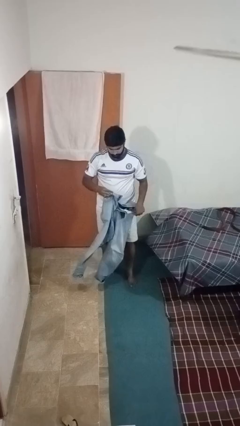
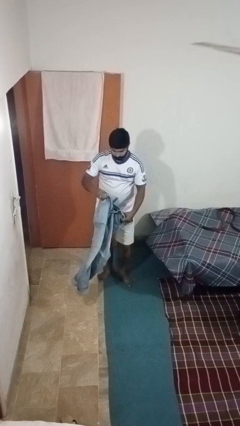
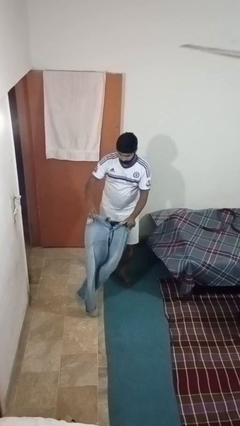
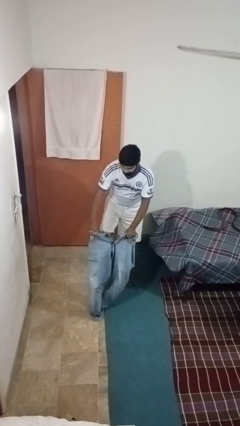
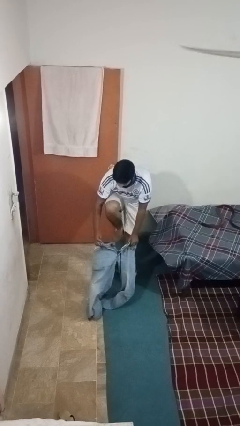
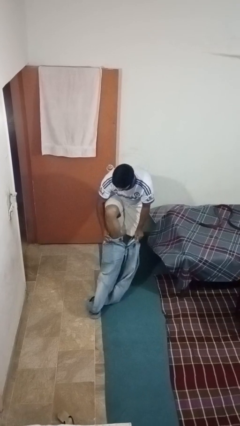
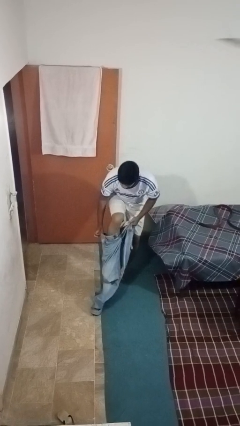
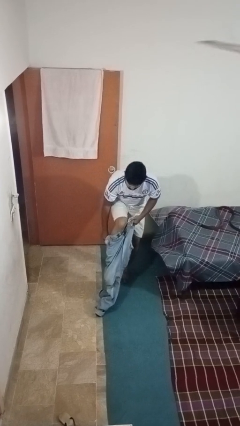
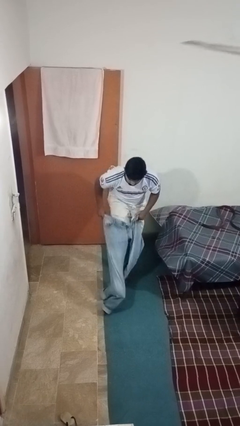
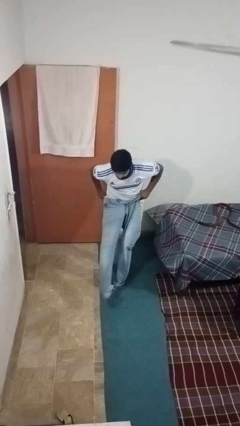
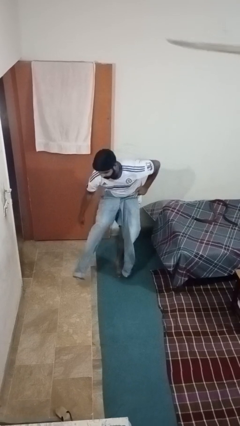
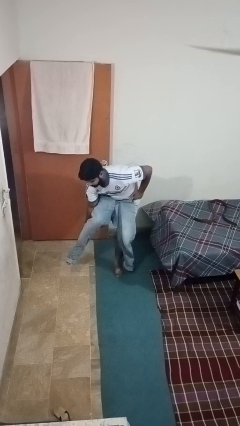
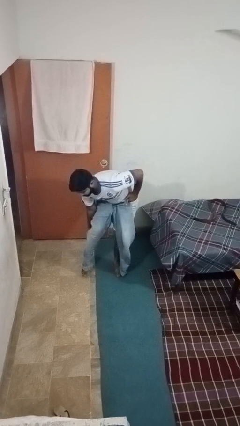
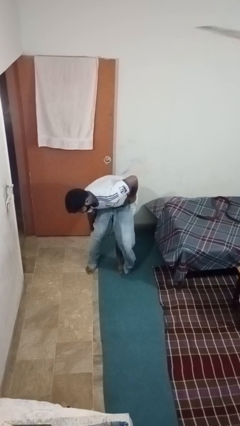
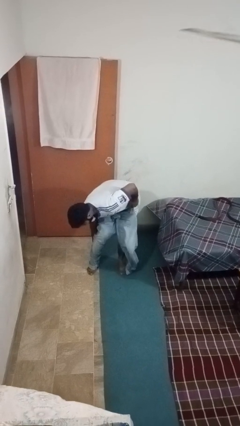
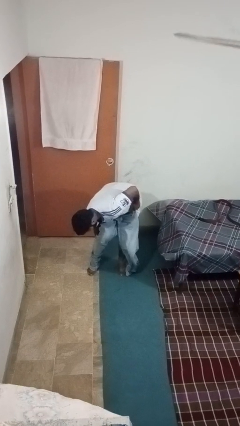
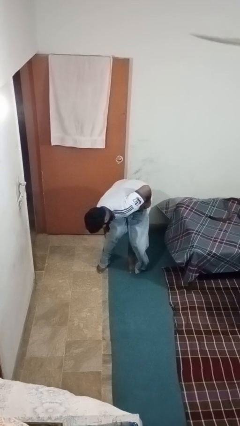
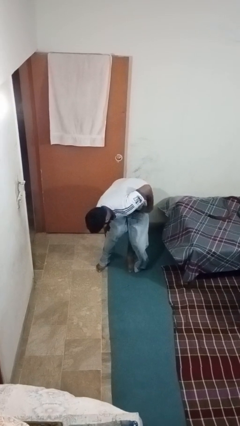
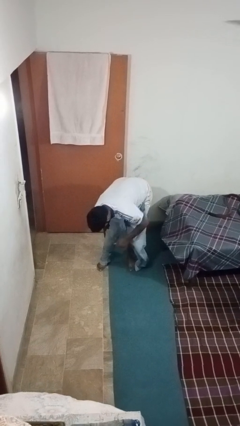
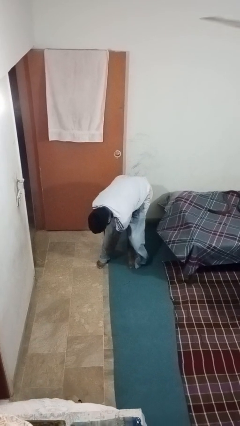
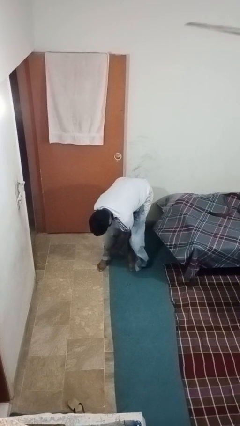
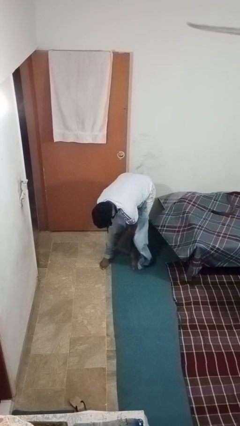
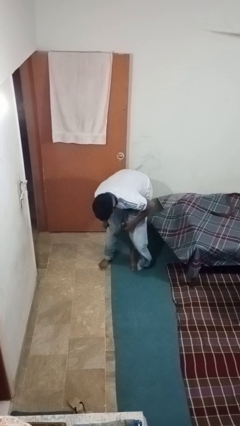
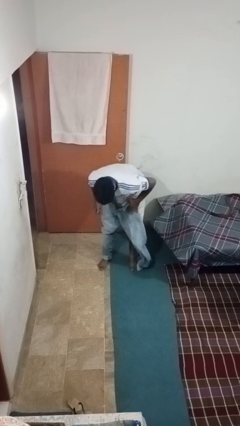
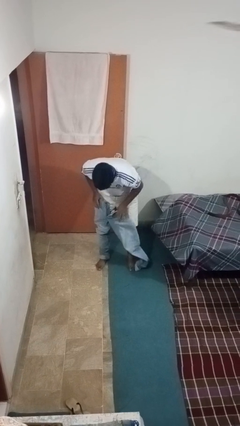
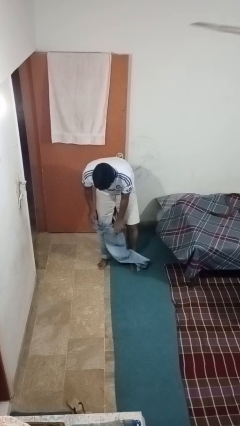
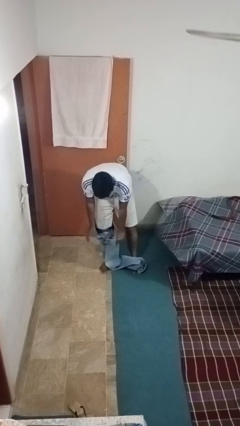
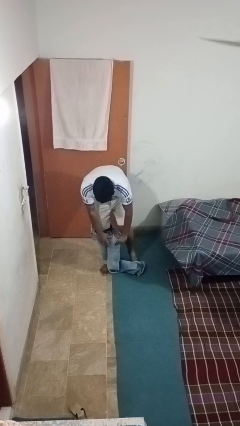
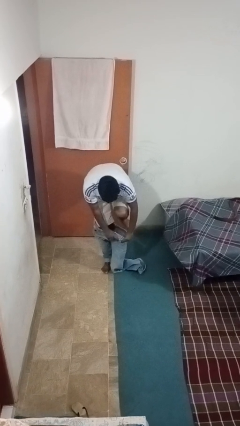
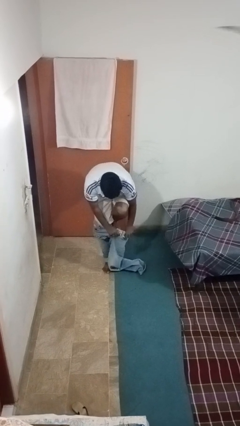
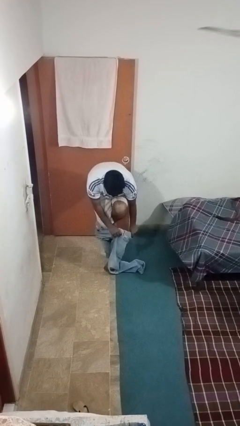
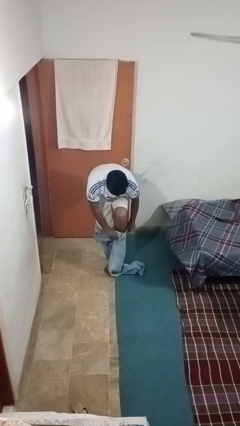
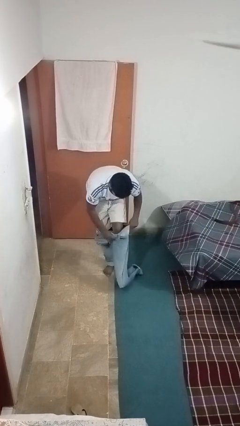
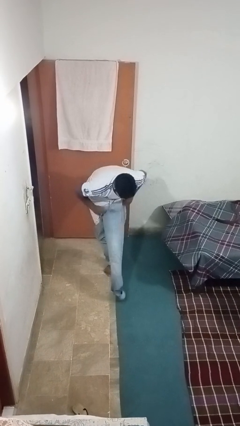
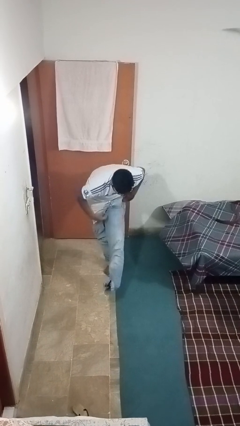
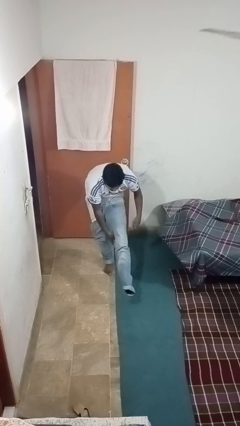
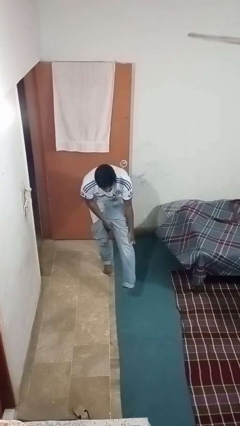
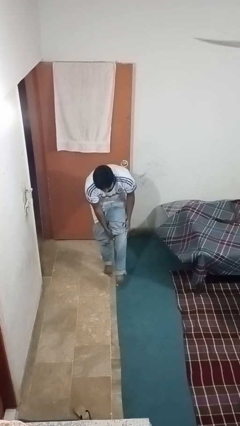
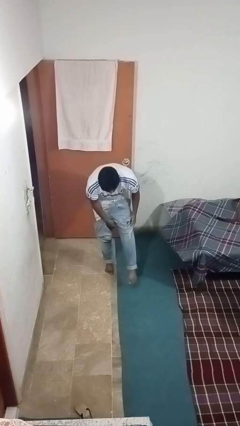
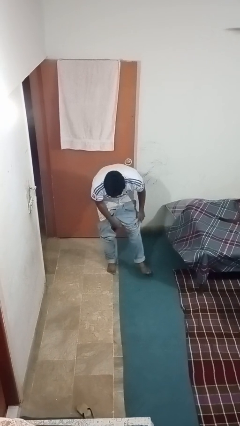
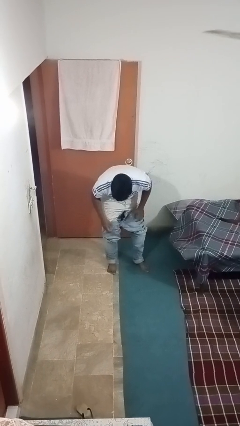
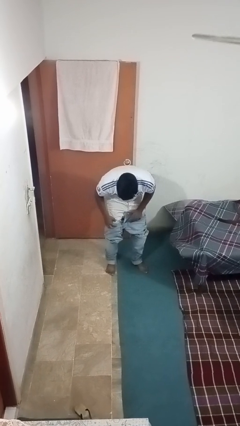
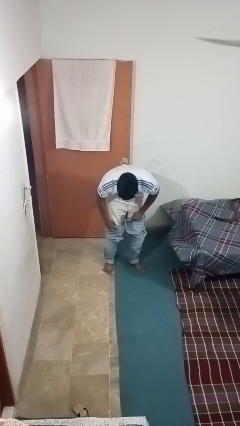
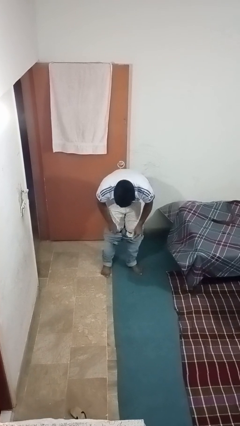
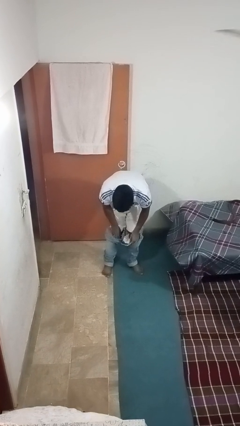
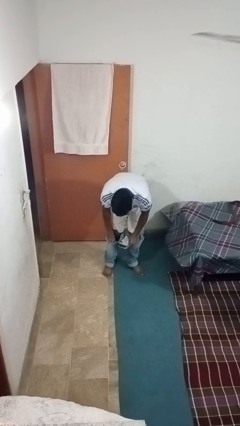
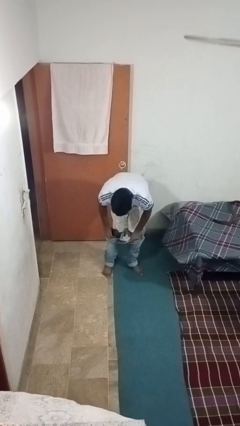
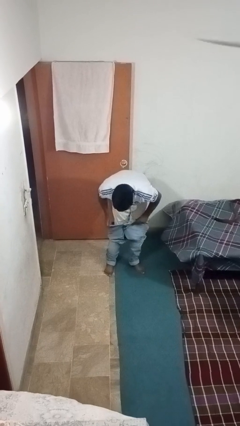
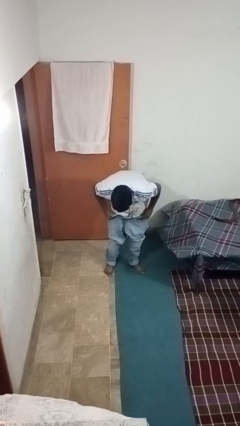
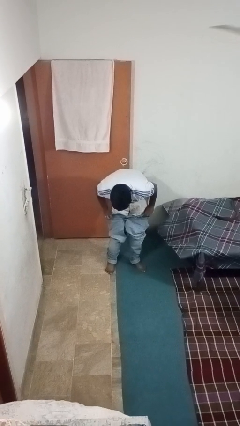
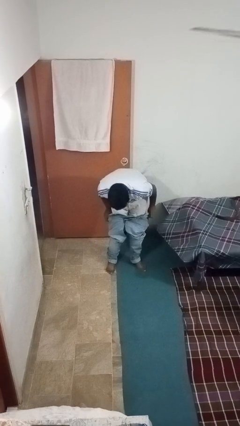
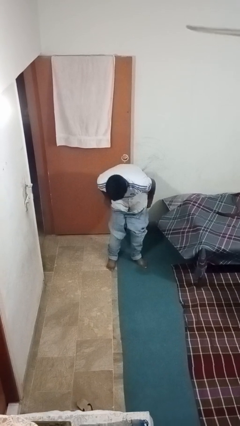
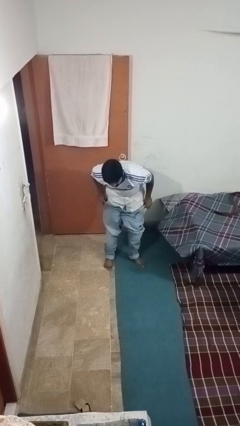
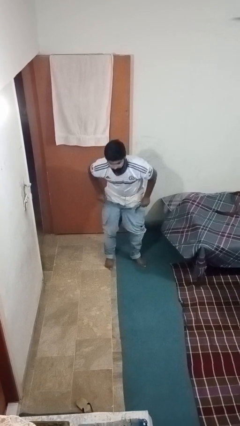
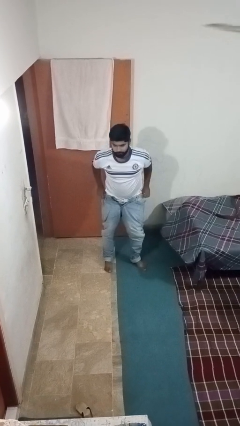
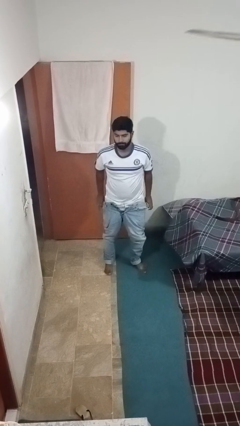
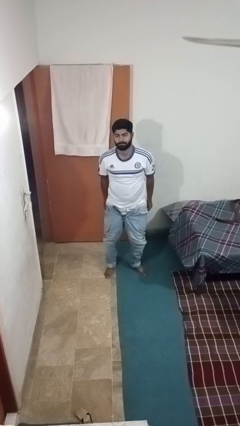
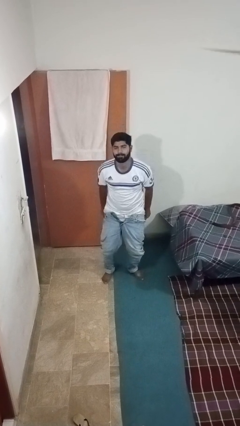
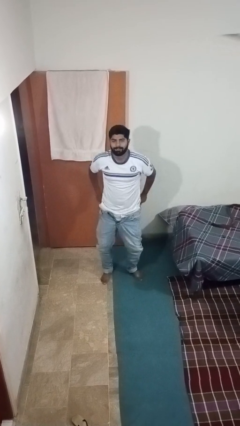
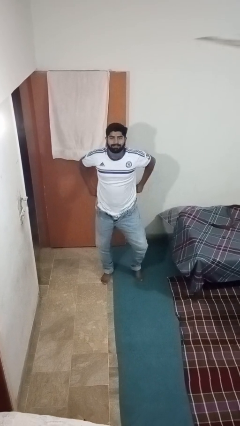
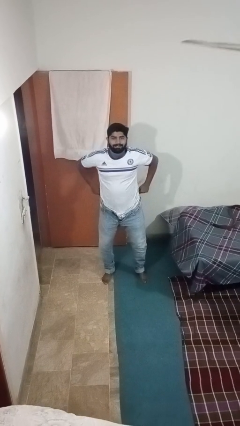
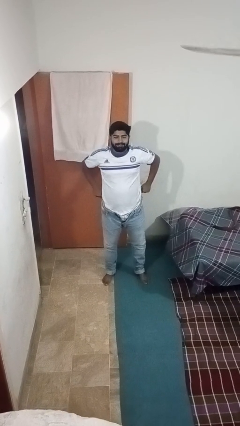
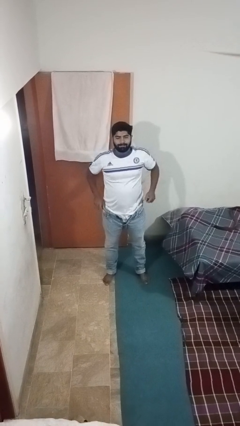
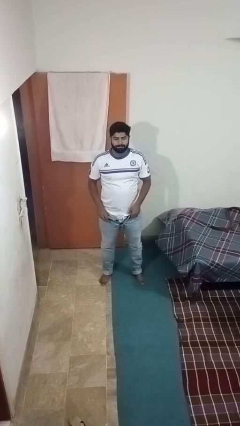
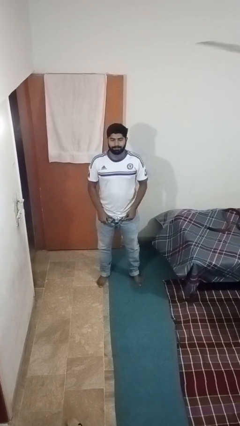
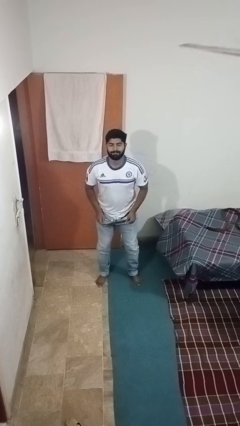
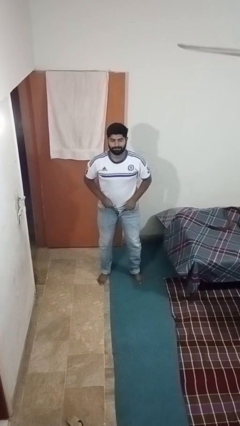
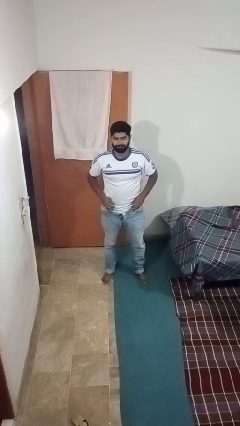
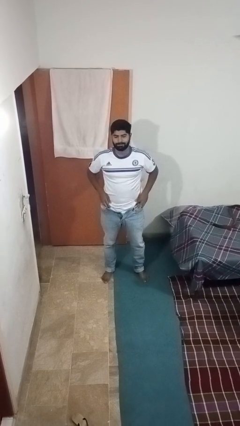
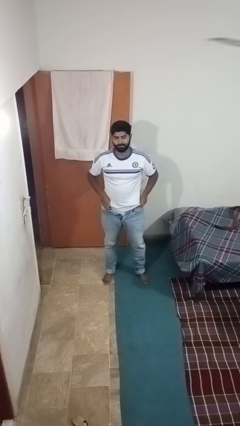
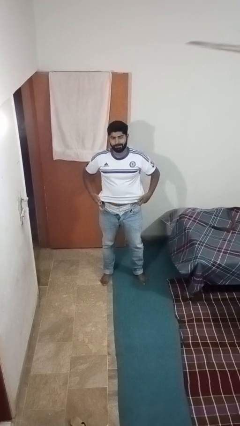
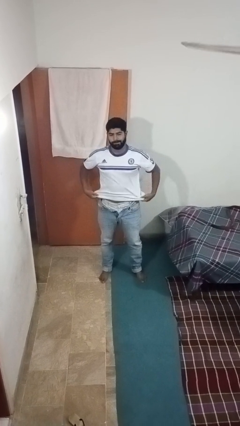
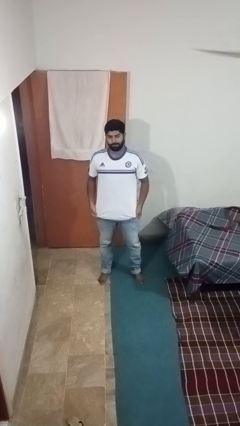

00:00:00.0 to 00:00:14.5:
person puts on pants

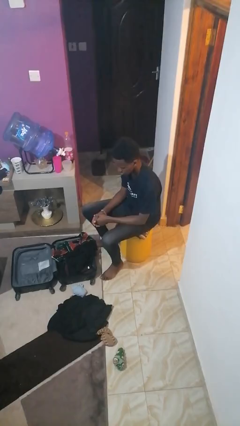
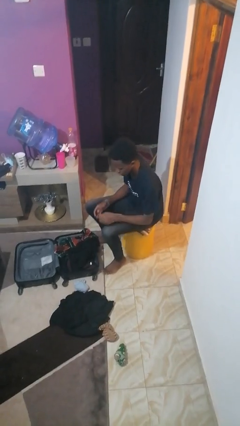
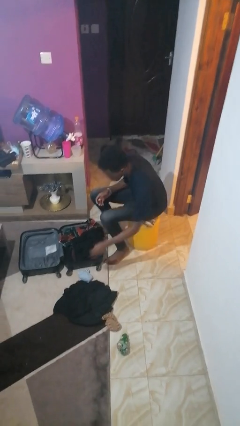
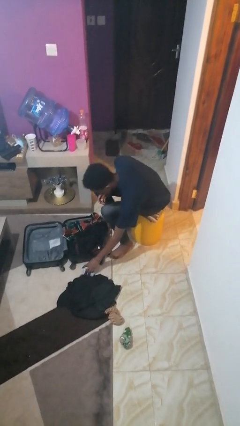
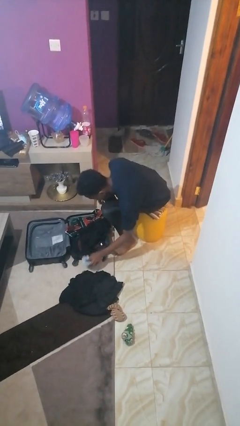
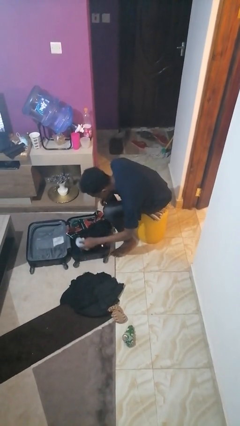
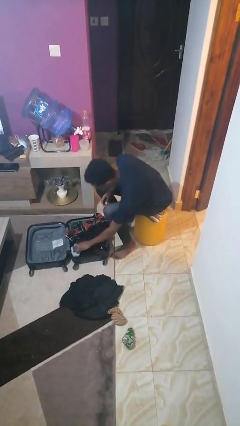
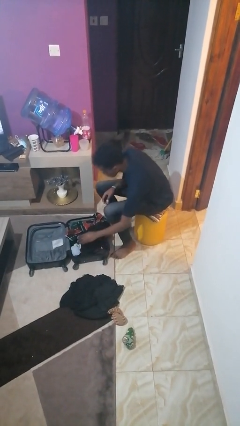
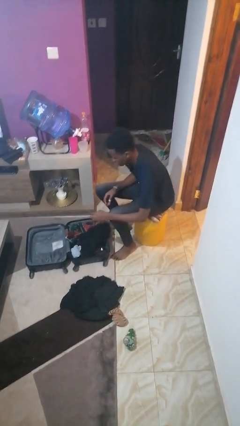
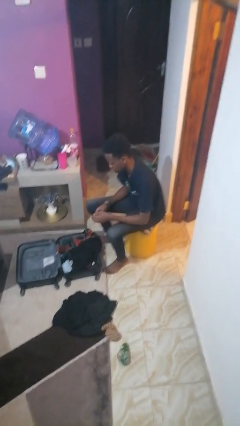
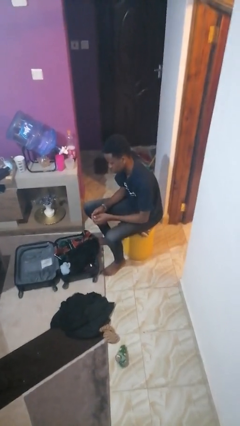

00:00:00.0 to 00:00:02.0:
person loads clothes into suitcase

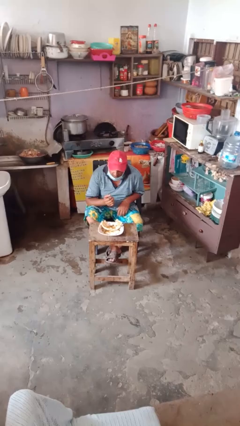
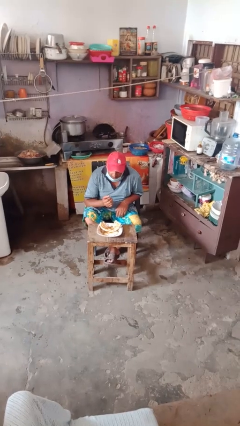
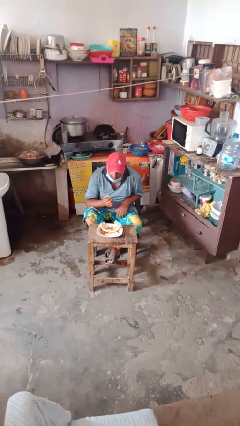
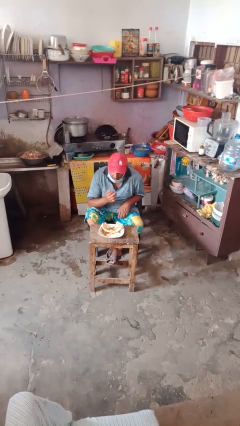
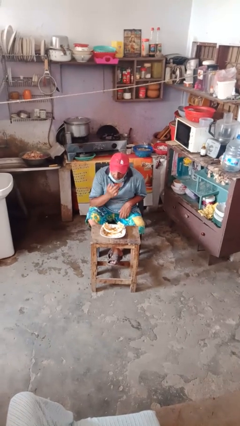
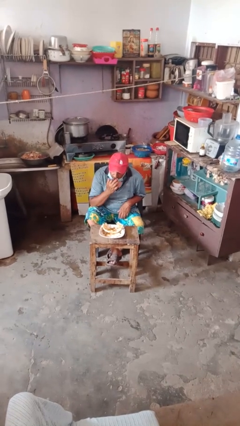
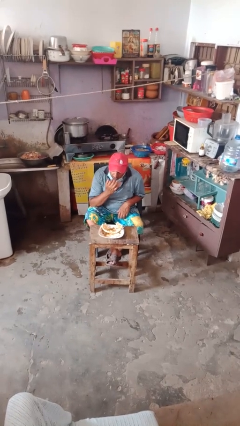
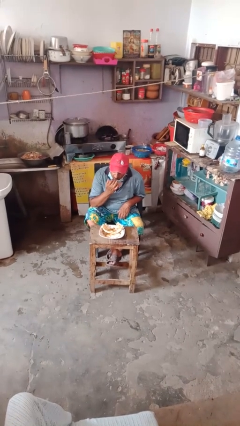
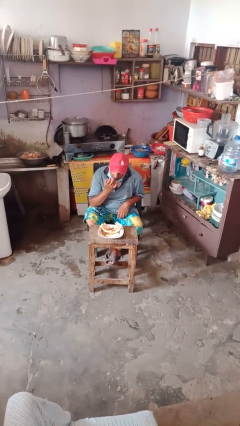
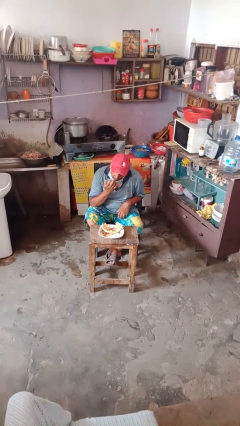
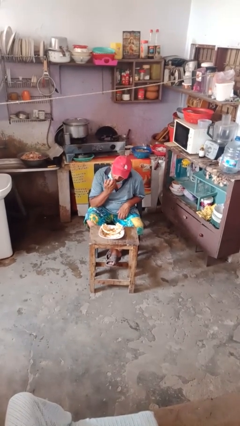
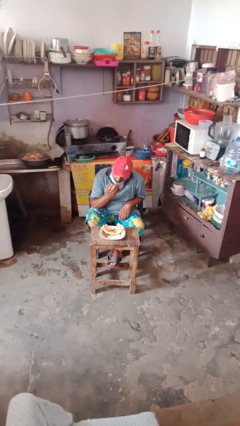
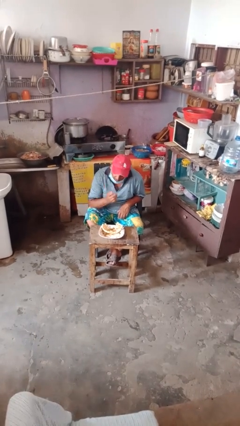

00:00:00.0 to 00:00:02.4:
person licks fingers
